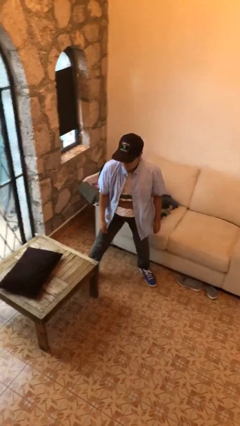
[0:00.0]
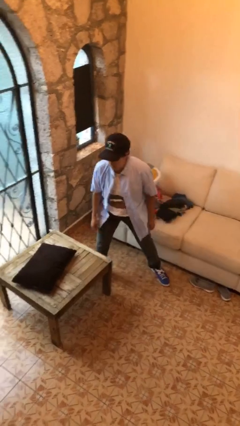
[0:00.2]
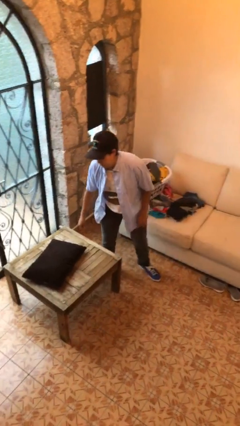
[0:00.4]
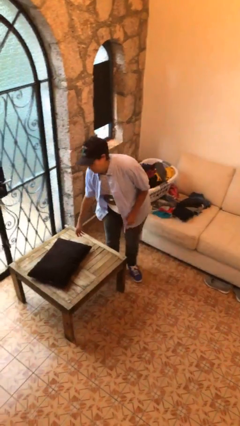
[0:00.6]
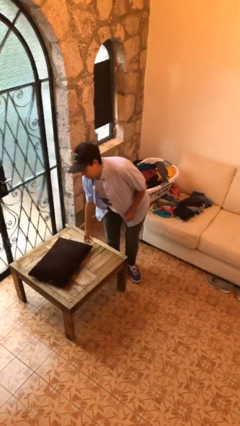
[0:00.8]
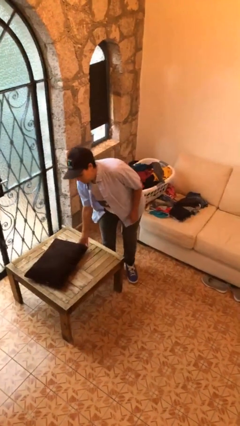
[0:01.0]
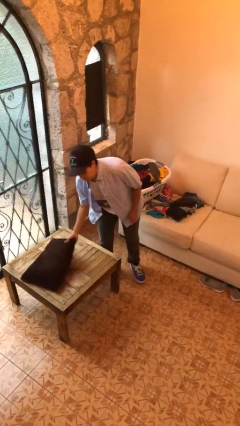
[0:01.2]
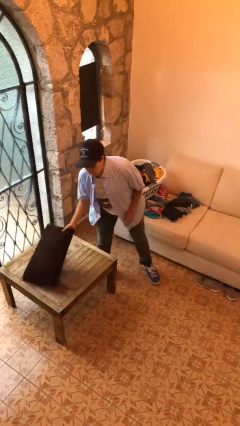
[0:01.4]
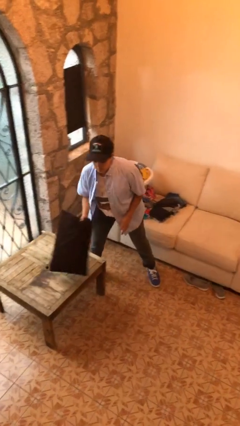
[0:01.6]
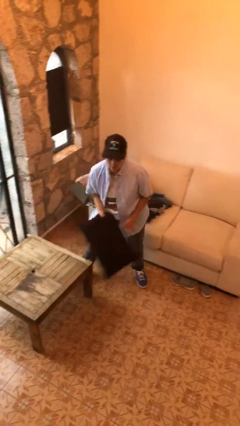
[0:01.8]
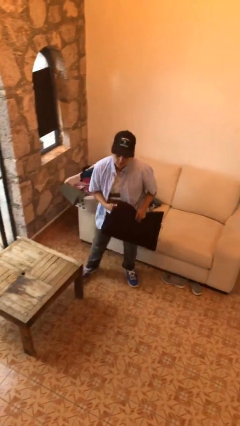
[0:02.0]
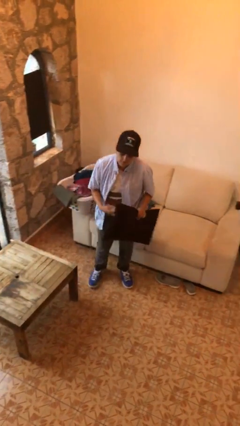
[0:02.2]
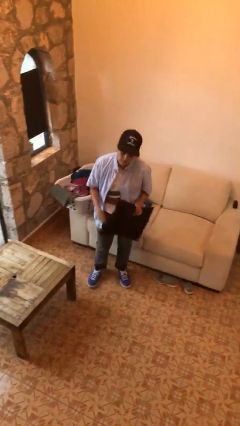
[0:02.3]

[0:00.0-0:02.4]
person picks up object from table

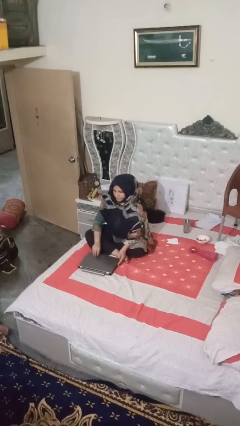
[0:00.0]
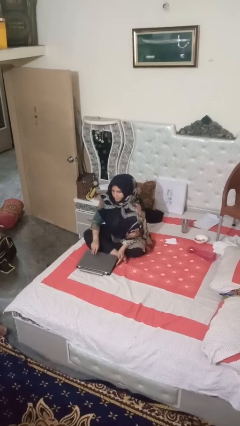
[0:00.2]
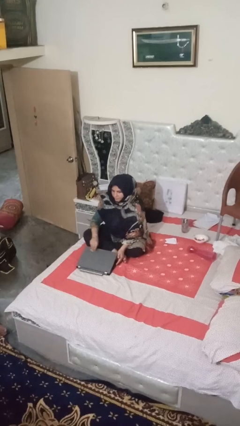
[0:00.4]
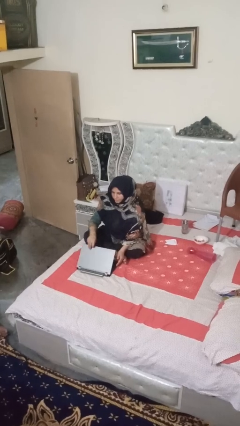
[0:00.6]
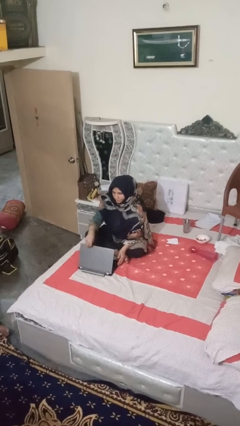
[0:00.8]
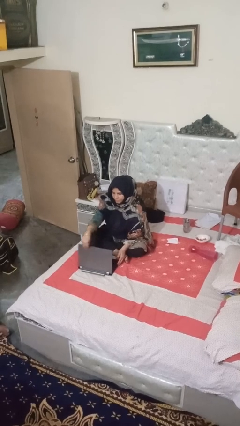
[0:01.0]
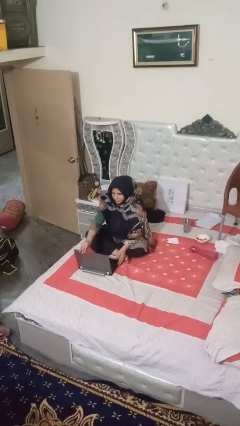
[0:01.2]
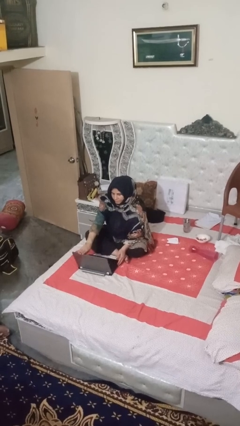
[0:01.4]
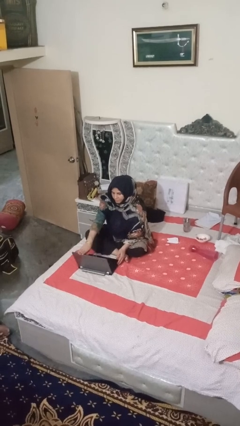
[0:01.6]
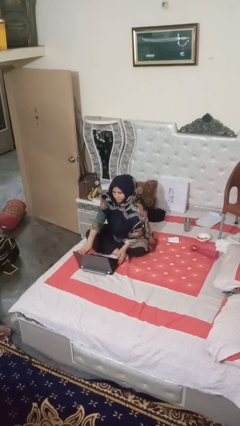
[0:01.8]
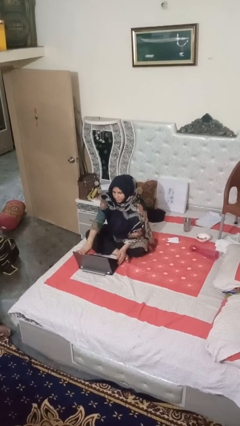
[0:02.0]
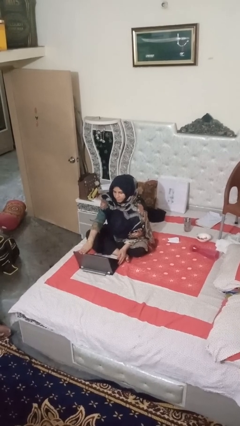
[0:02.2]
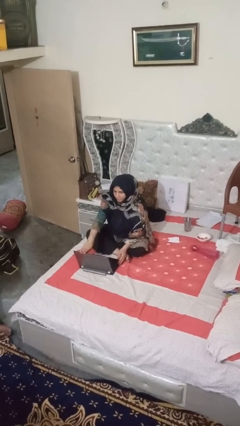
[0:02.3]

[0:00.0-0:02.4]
person opens laptop

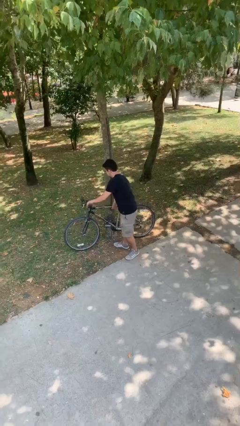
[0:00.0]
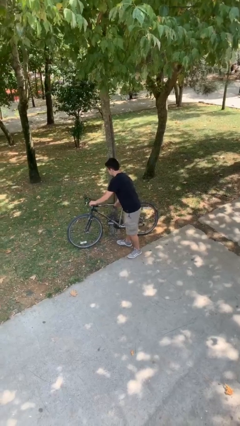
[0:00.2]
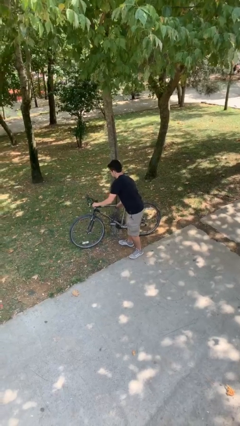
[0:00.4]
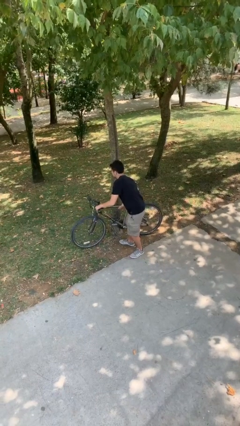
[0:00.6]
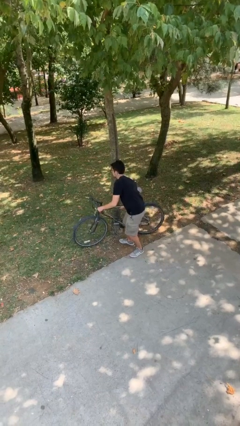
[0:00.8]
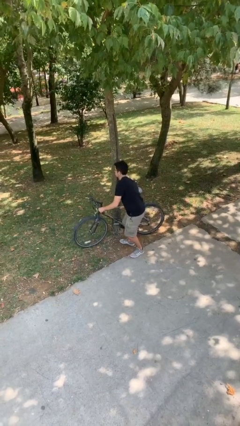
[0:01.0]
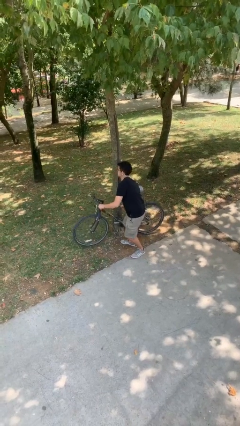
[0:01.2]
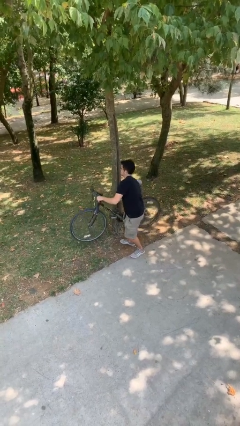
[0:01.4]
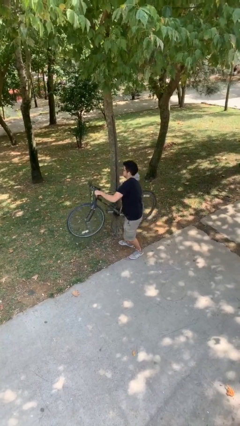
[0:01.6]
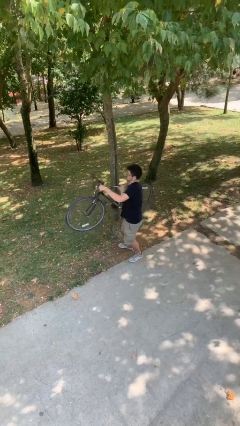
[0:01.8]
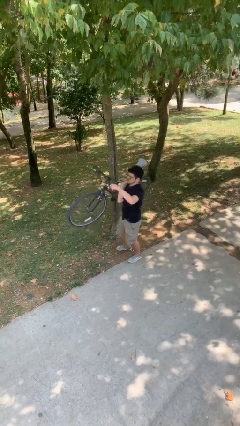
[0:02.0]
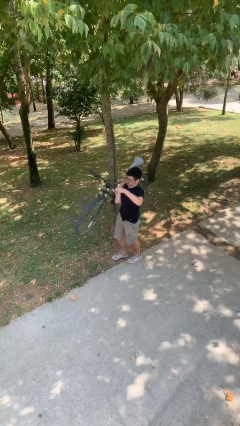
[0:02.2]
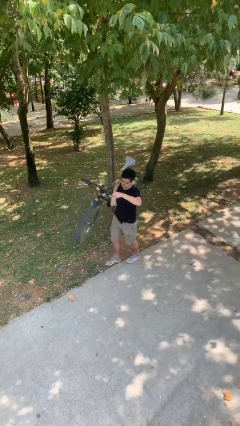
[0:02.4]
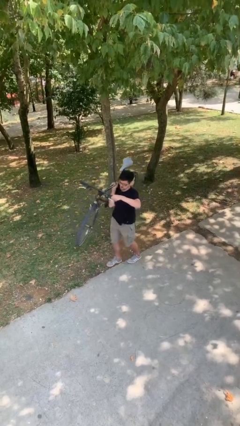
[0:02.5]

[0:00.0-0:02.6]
person picks up object from floor

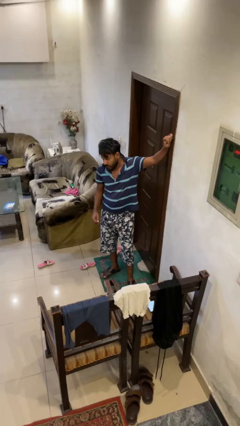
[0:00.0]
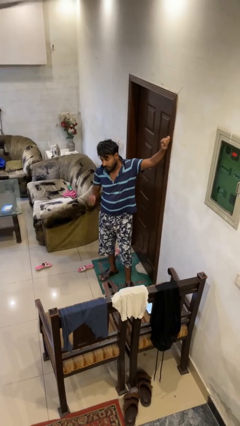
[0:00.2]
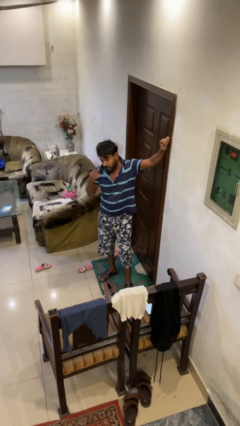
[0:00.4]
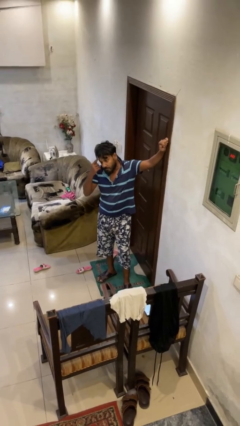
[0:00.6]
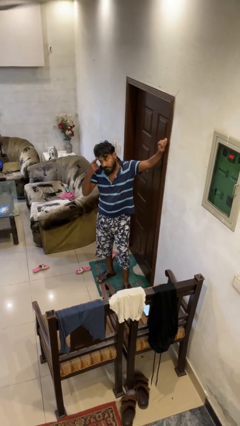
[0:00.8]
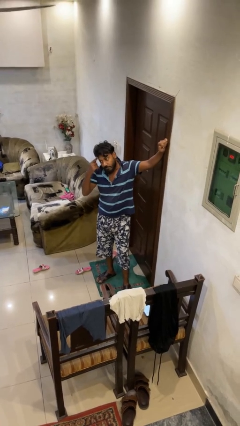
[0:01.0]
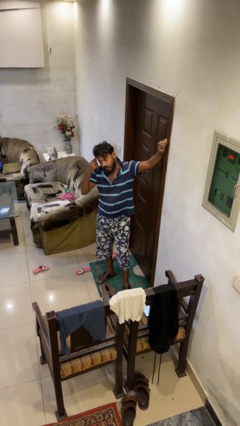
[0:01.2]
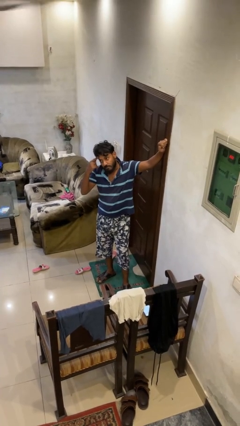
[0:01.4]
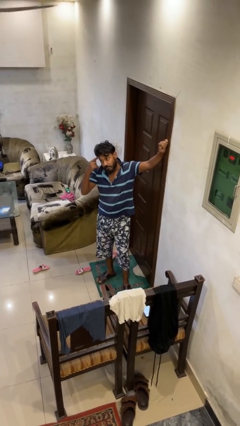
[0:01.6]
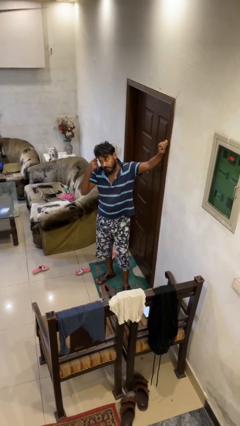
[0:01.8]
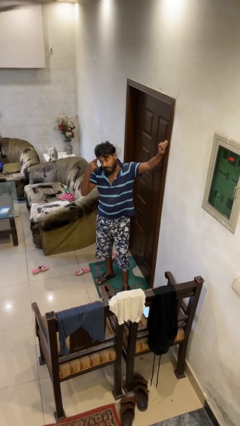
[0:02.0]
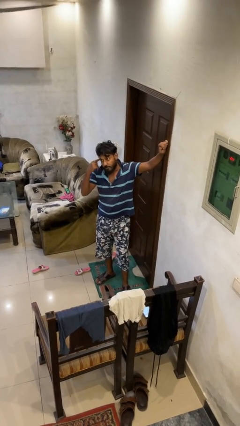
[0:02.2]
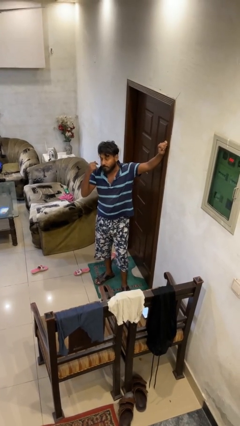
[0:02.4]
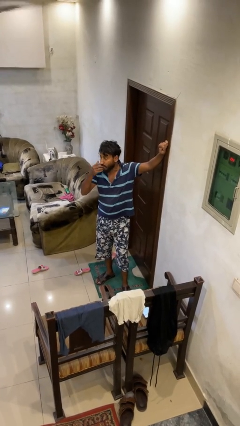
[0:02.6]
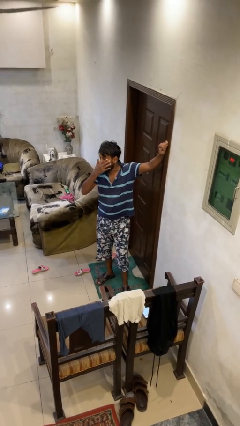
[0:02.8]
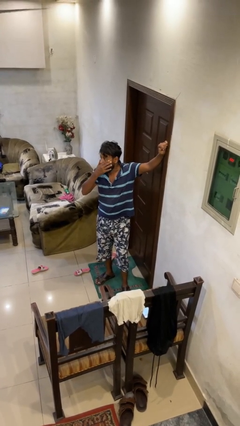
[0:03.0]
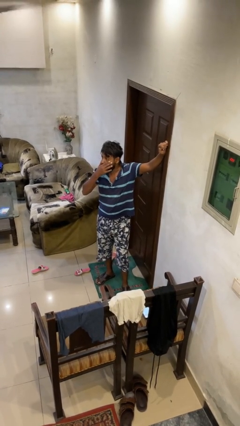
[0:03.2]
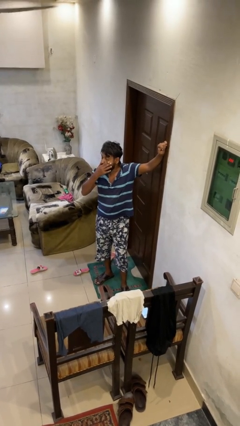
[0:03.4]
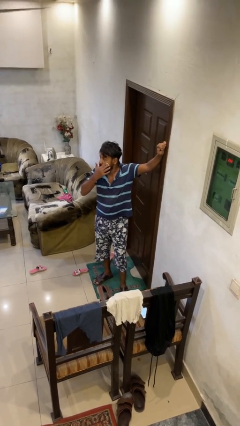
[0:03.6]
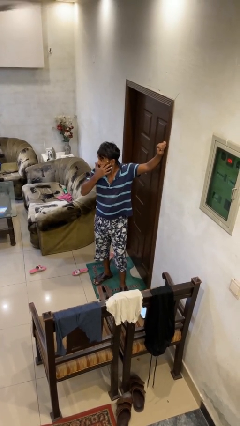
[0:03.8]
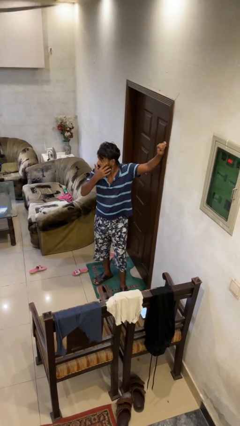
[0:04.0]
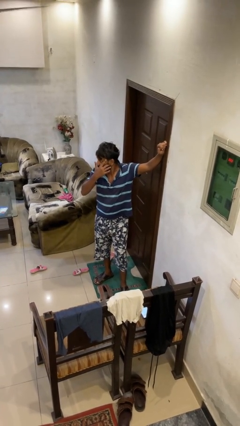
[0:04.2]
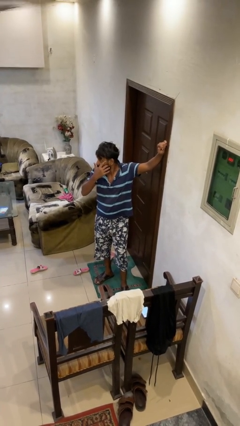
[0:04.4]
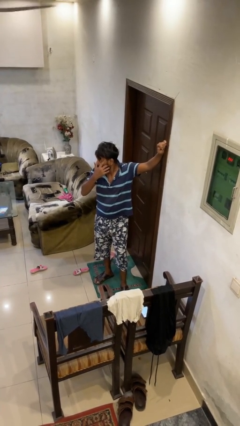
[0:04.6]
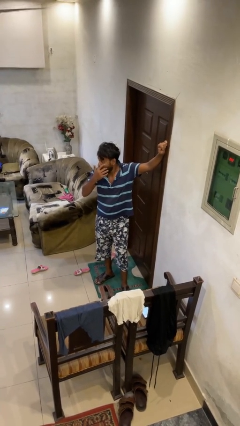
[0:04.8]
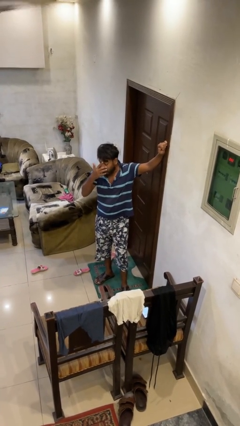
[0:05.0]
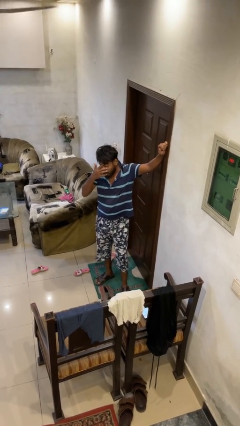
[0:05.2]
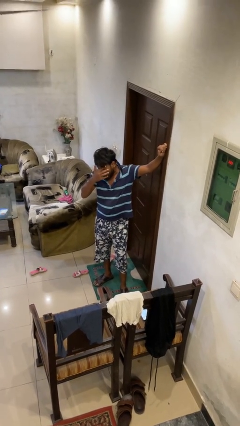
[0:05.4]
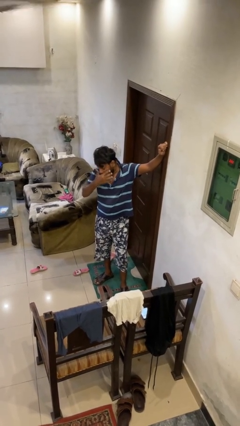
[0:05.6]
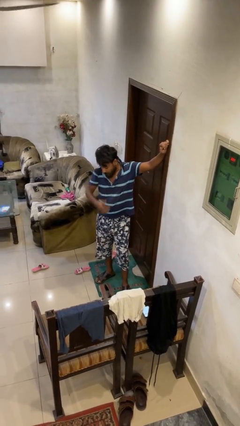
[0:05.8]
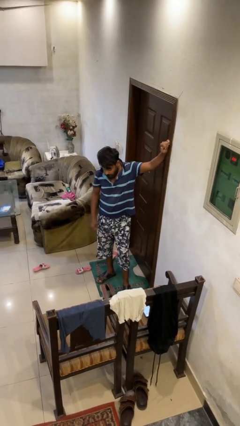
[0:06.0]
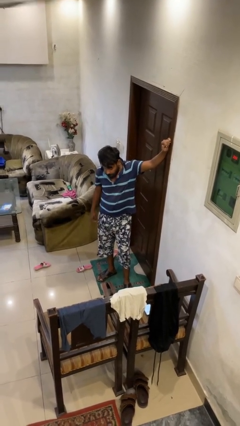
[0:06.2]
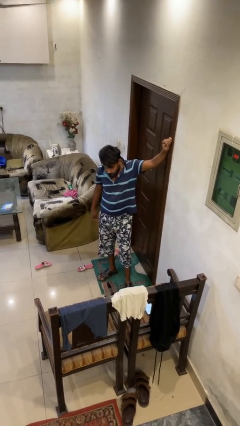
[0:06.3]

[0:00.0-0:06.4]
person scratches face

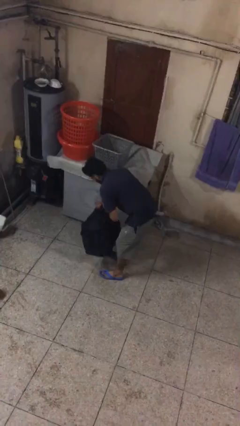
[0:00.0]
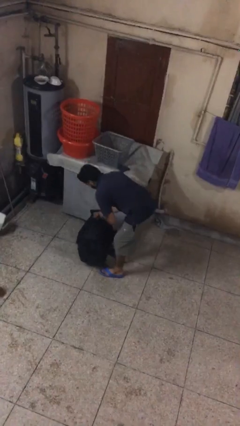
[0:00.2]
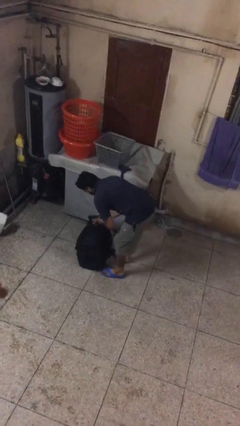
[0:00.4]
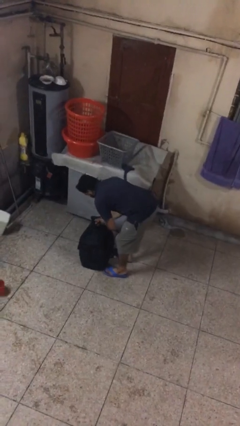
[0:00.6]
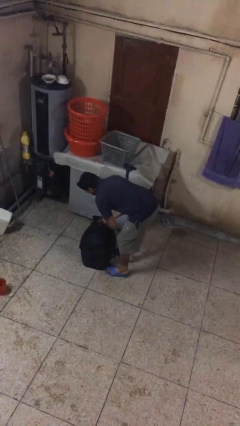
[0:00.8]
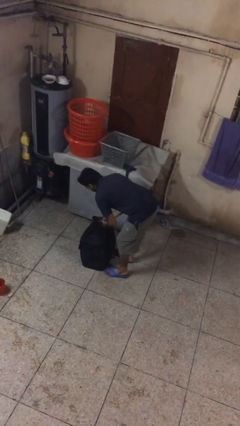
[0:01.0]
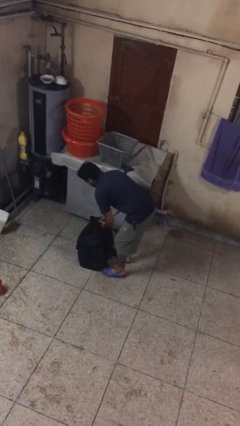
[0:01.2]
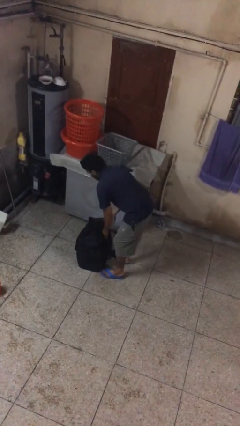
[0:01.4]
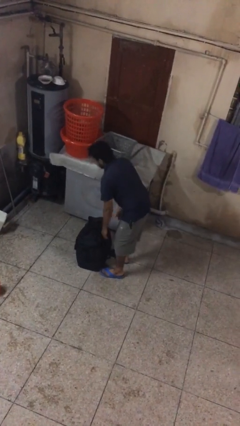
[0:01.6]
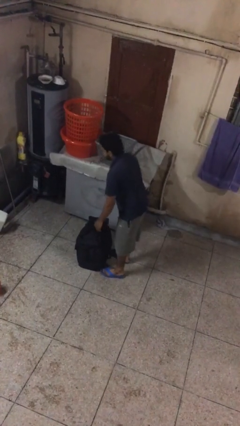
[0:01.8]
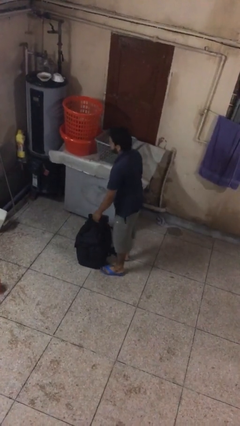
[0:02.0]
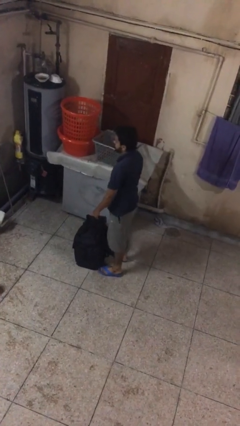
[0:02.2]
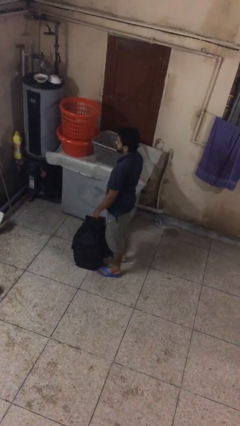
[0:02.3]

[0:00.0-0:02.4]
person puts down object on floor

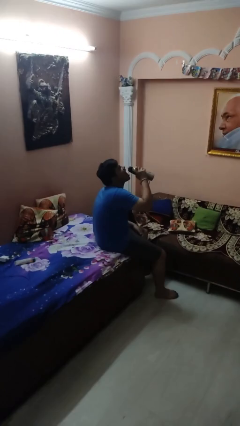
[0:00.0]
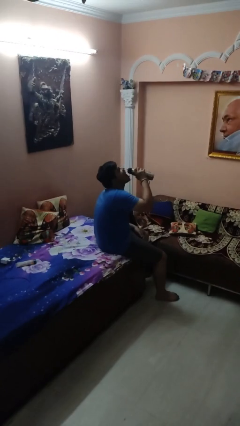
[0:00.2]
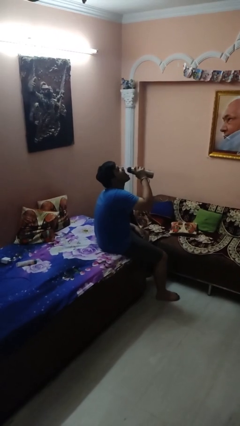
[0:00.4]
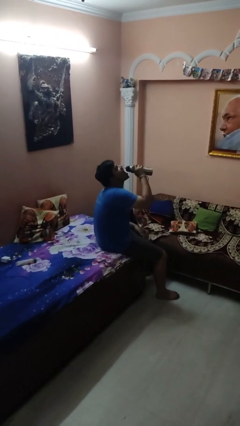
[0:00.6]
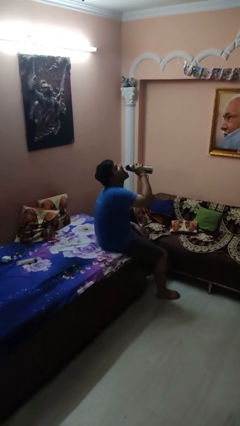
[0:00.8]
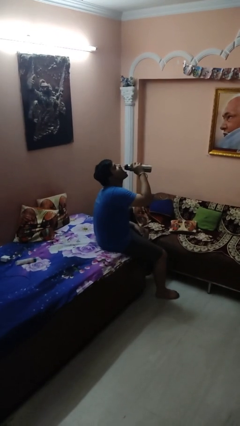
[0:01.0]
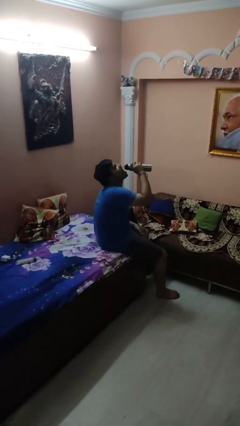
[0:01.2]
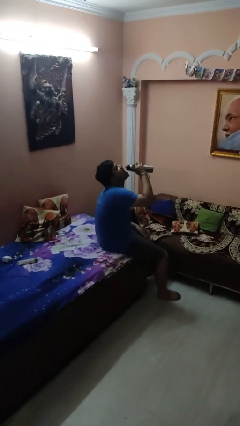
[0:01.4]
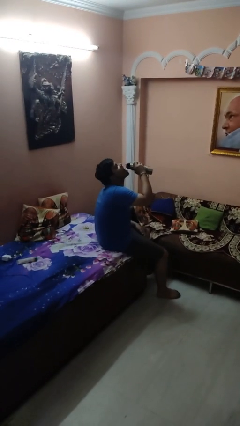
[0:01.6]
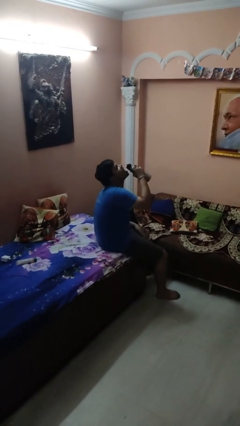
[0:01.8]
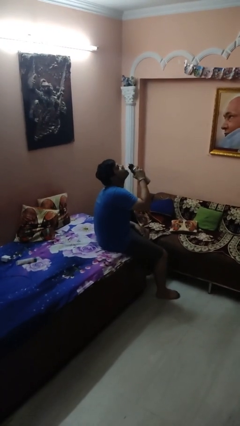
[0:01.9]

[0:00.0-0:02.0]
person drinks from bottle
